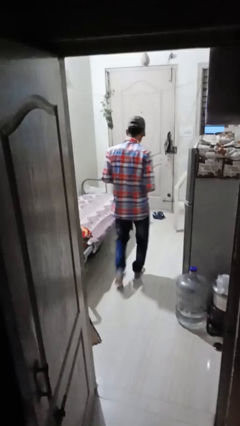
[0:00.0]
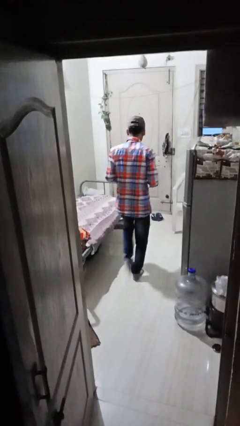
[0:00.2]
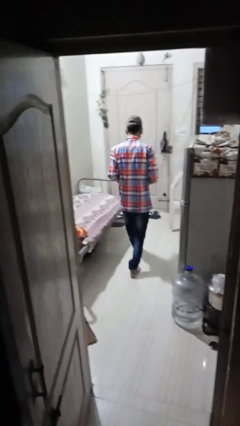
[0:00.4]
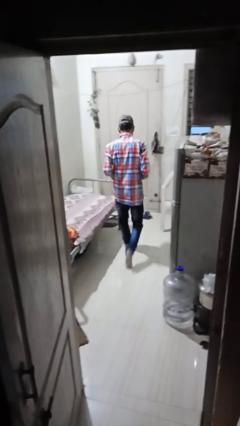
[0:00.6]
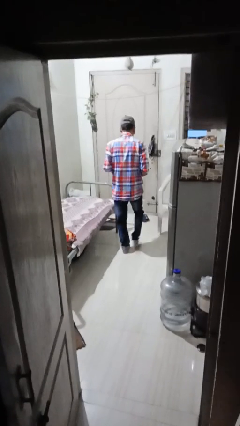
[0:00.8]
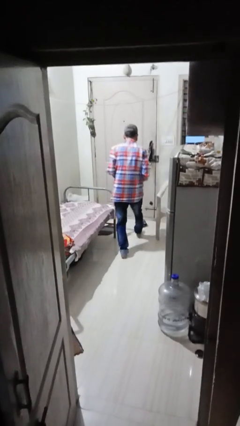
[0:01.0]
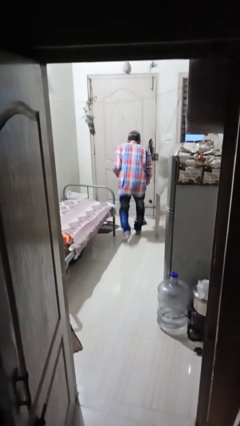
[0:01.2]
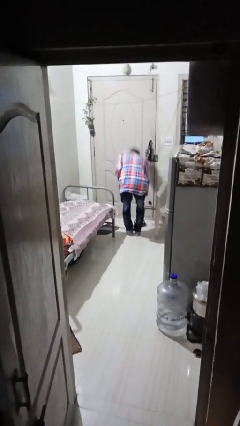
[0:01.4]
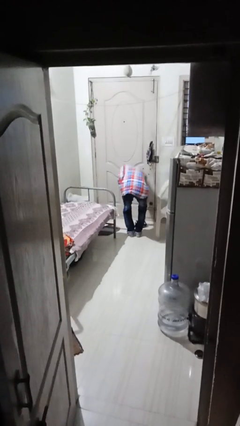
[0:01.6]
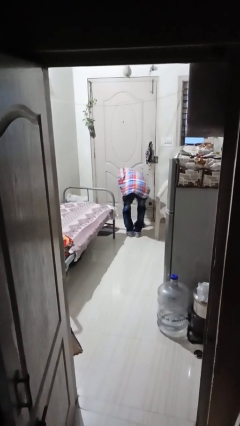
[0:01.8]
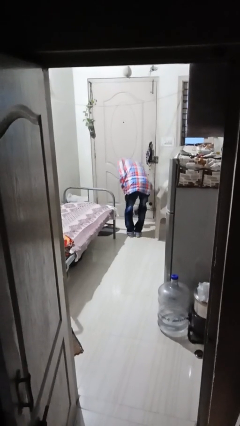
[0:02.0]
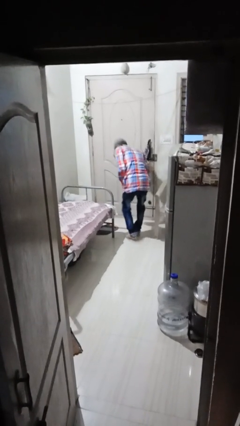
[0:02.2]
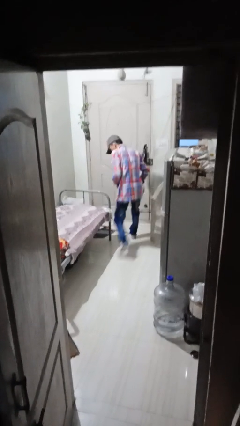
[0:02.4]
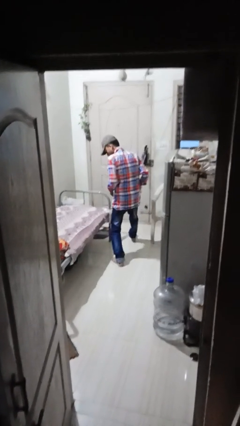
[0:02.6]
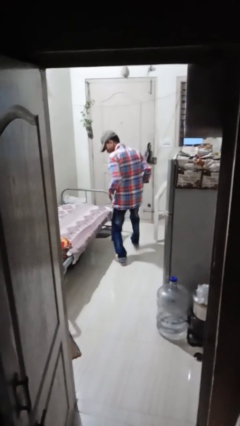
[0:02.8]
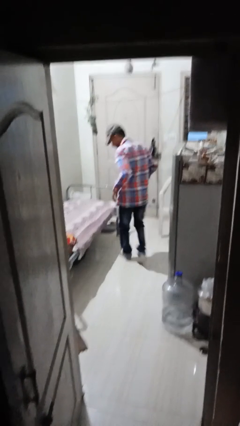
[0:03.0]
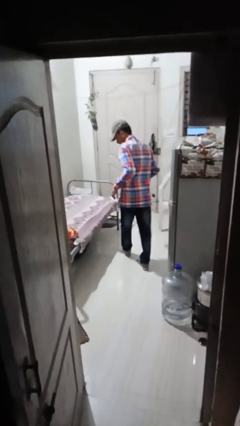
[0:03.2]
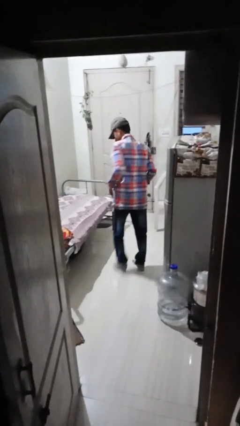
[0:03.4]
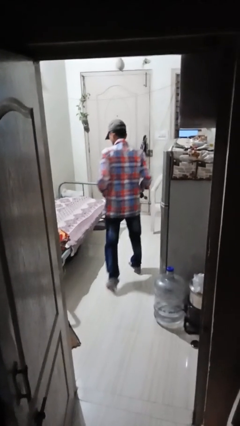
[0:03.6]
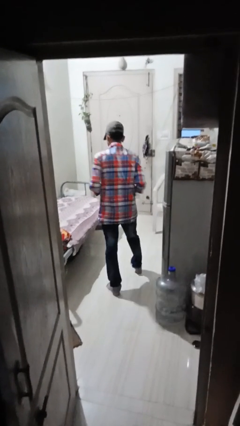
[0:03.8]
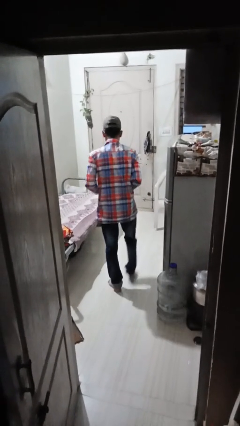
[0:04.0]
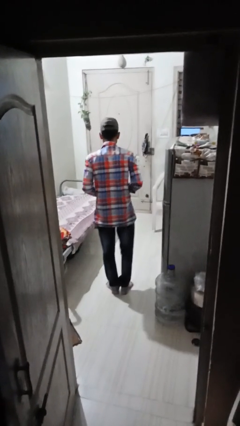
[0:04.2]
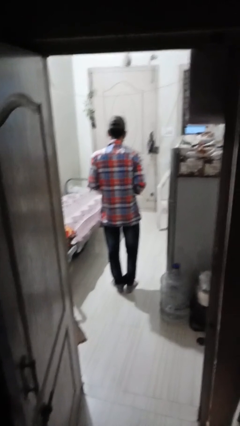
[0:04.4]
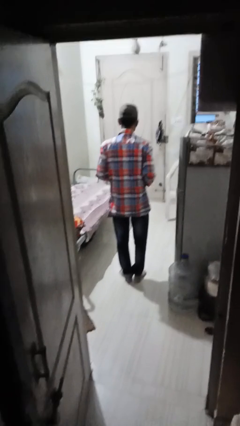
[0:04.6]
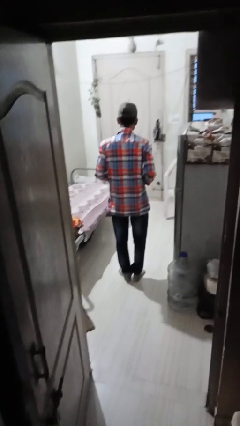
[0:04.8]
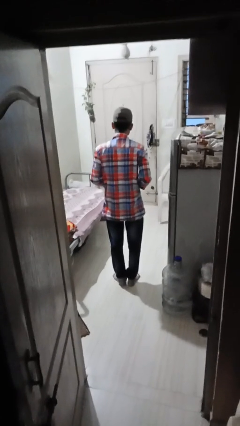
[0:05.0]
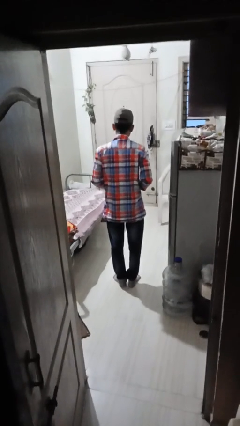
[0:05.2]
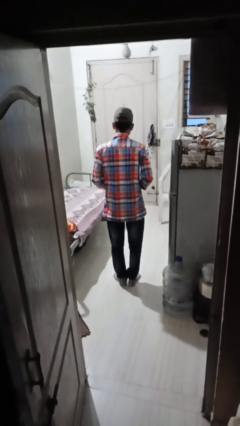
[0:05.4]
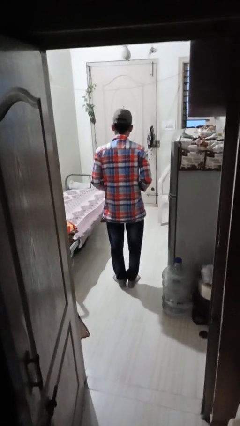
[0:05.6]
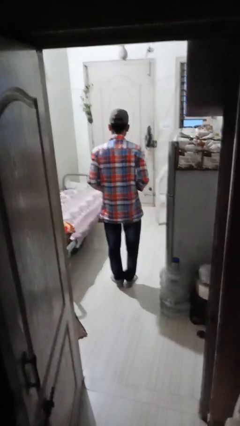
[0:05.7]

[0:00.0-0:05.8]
person picks up object from floor

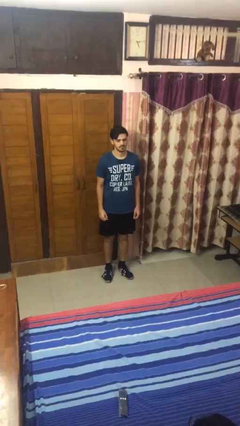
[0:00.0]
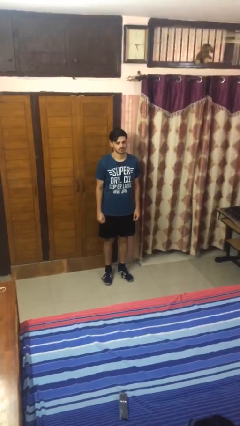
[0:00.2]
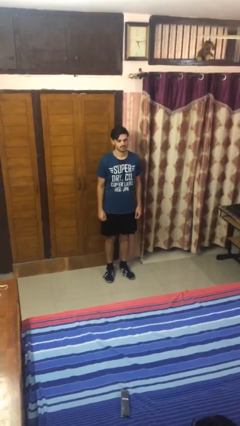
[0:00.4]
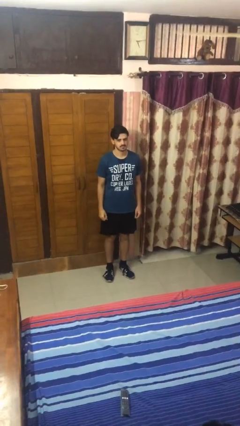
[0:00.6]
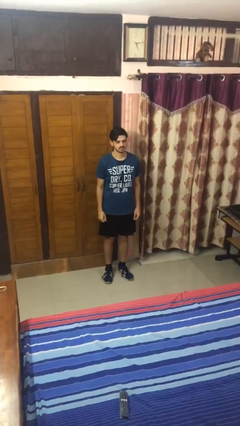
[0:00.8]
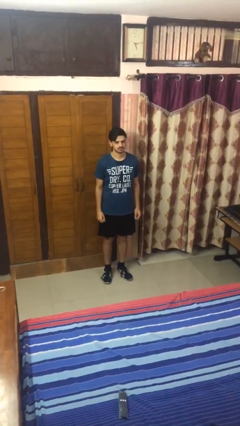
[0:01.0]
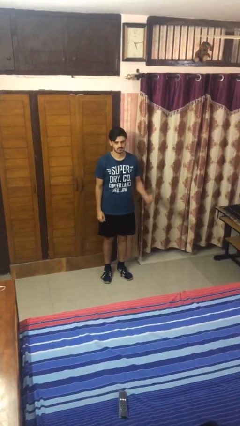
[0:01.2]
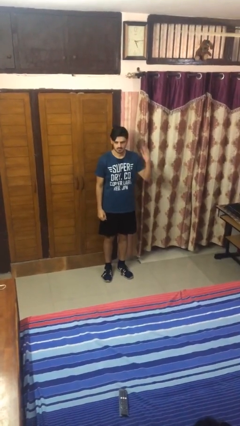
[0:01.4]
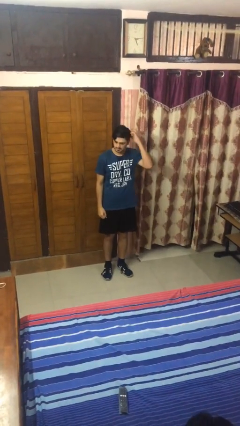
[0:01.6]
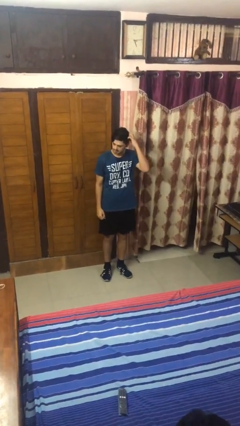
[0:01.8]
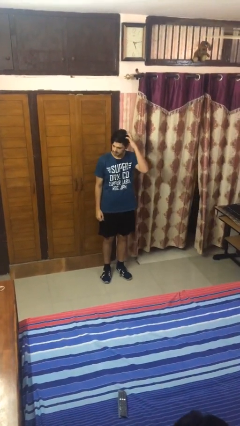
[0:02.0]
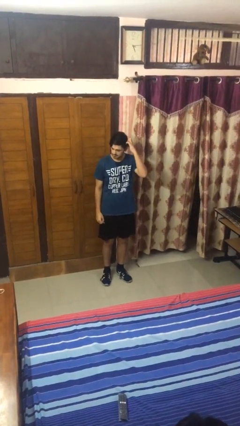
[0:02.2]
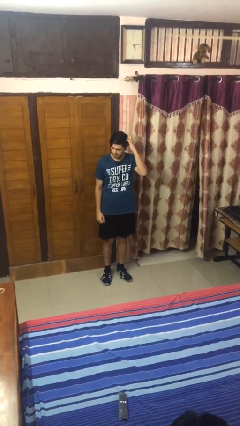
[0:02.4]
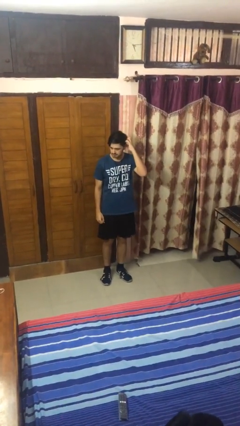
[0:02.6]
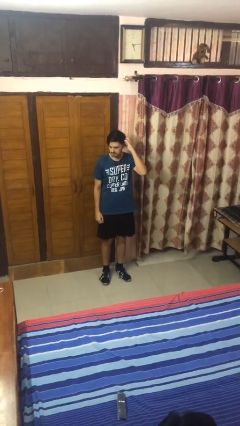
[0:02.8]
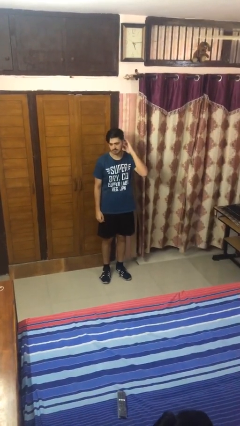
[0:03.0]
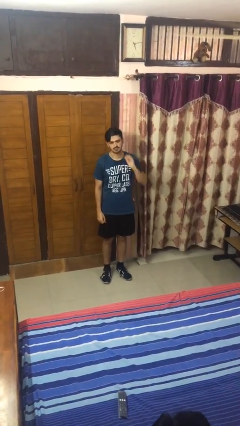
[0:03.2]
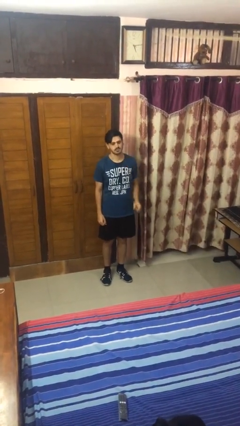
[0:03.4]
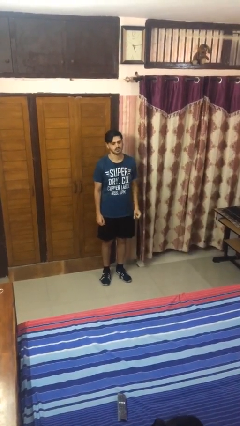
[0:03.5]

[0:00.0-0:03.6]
person scratches face

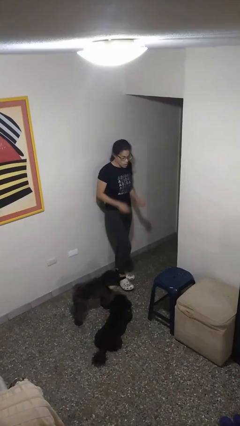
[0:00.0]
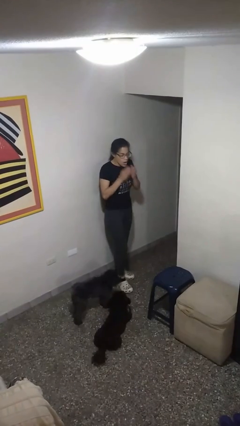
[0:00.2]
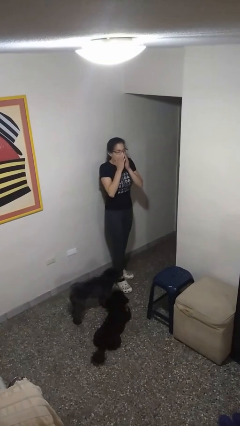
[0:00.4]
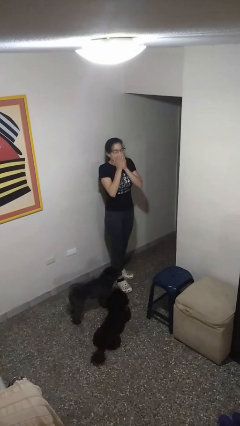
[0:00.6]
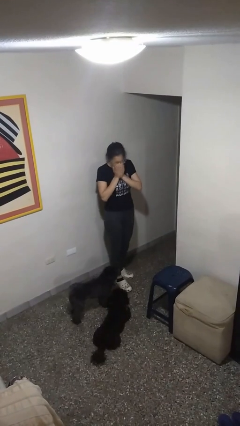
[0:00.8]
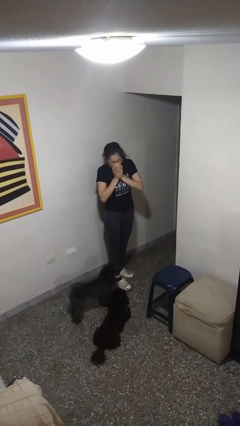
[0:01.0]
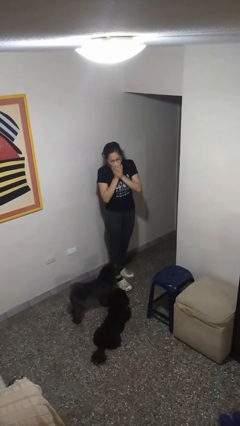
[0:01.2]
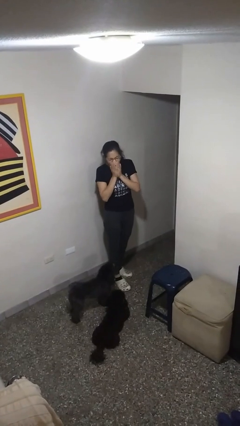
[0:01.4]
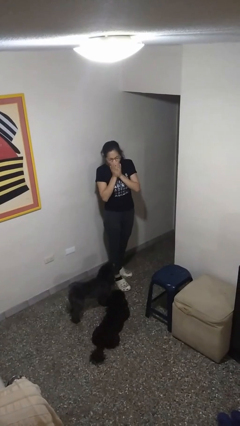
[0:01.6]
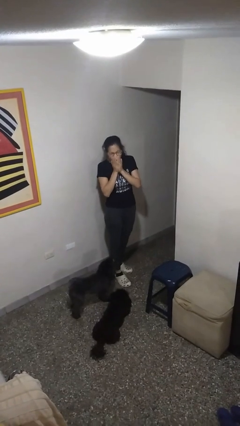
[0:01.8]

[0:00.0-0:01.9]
person sneezes into hand

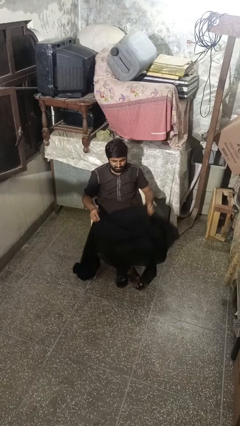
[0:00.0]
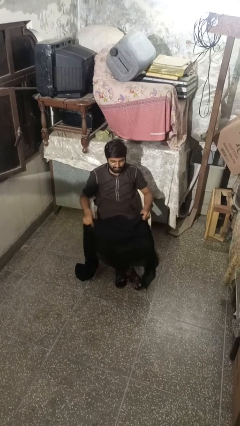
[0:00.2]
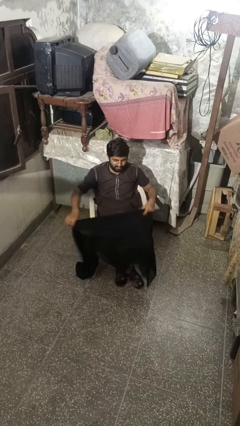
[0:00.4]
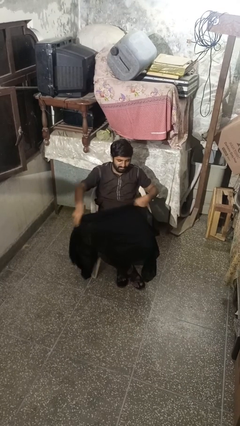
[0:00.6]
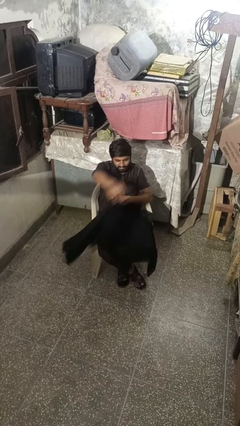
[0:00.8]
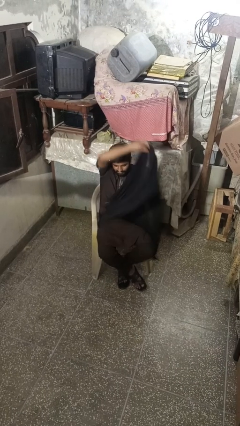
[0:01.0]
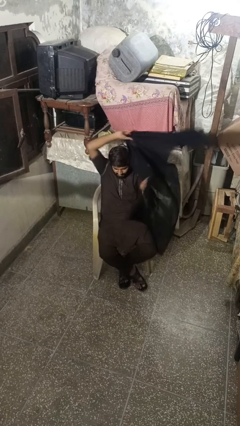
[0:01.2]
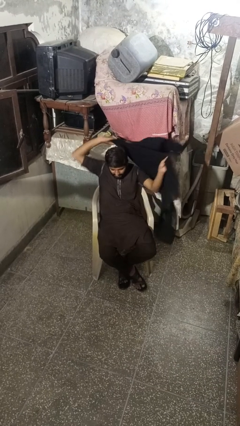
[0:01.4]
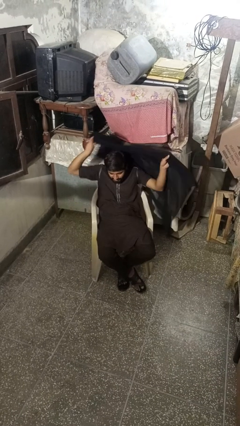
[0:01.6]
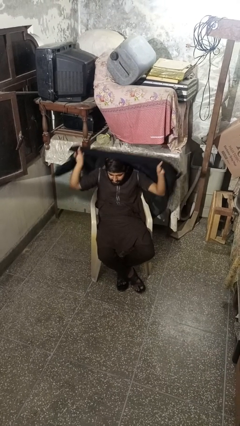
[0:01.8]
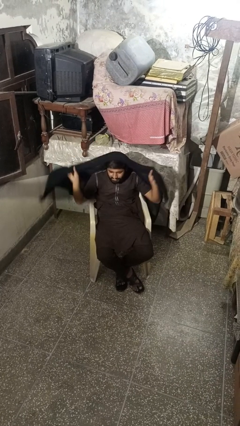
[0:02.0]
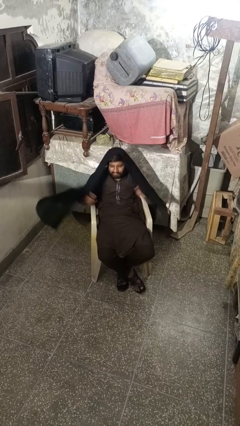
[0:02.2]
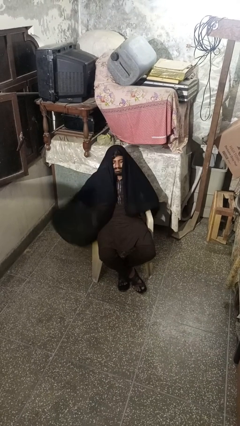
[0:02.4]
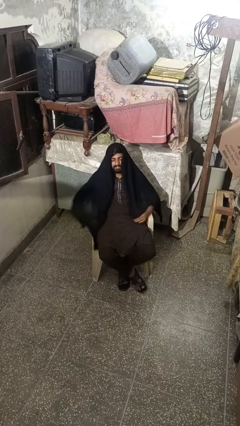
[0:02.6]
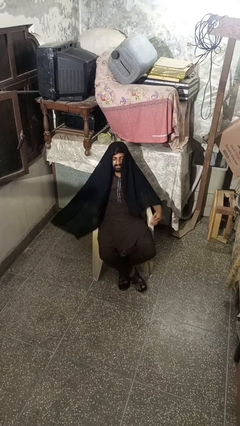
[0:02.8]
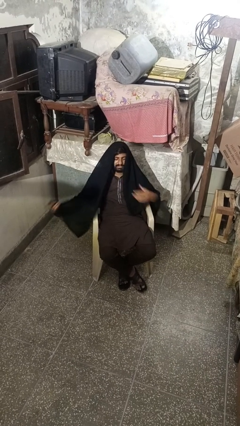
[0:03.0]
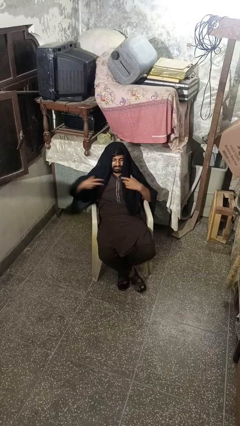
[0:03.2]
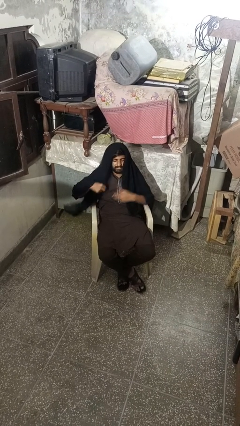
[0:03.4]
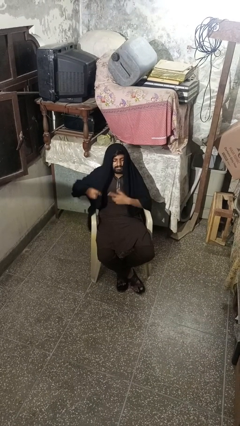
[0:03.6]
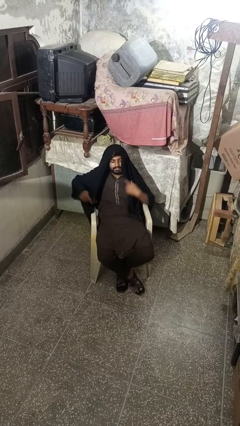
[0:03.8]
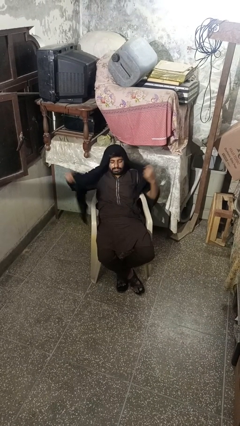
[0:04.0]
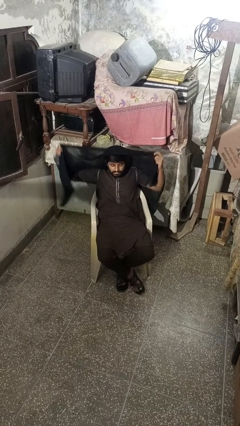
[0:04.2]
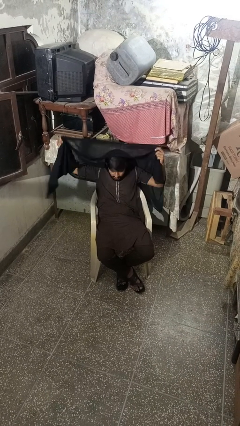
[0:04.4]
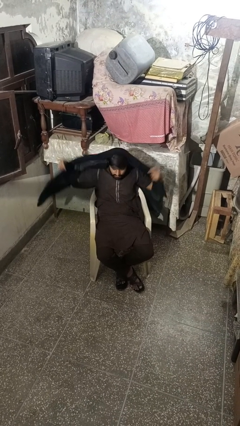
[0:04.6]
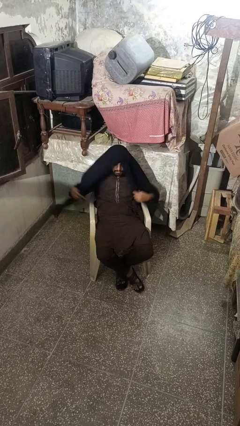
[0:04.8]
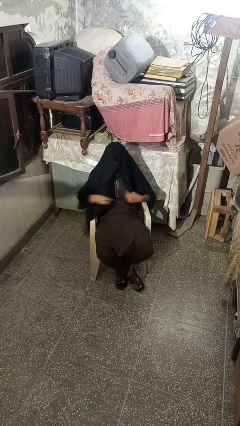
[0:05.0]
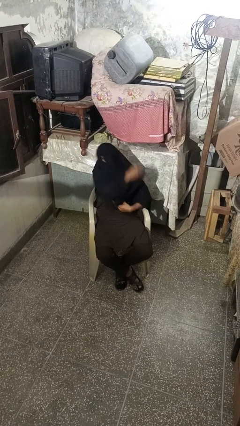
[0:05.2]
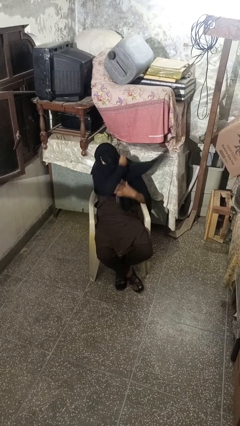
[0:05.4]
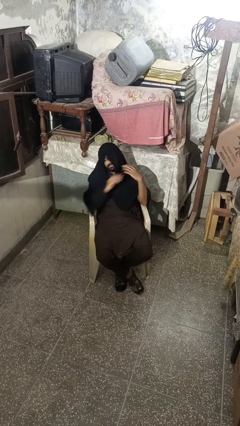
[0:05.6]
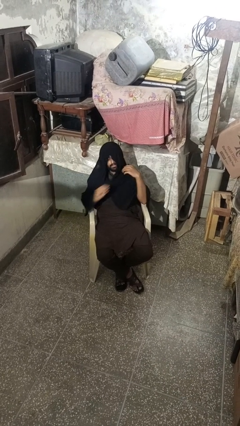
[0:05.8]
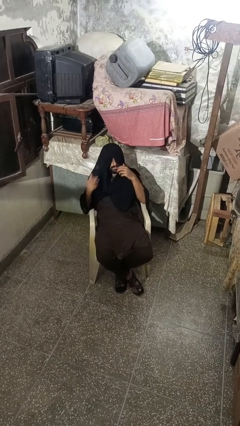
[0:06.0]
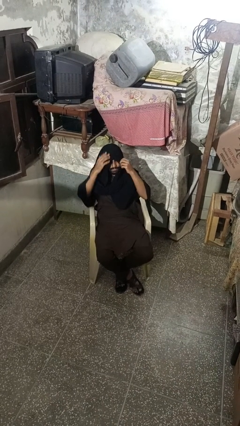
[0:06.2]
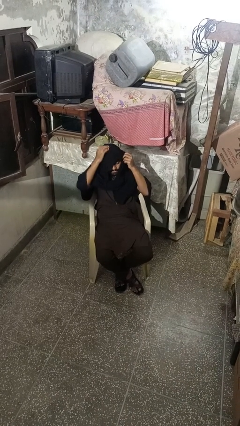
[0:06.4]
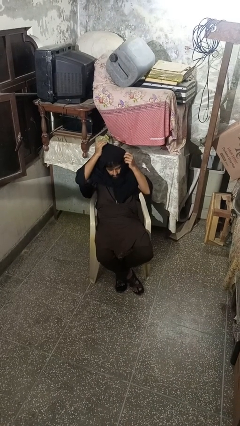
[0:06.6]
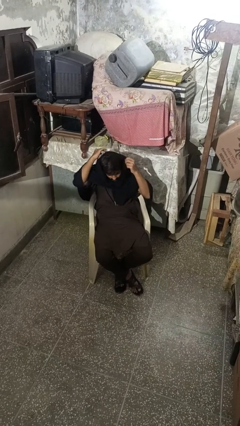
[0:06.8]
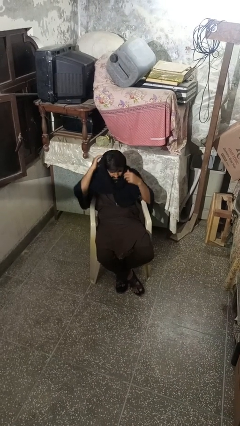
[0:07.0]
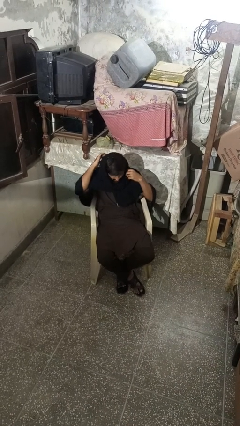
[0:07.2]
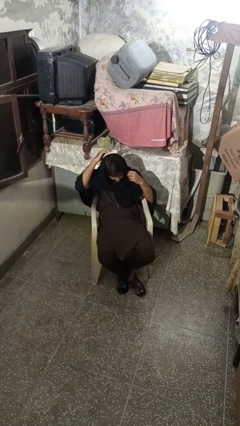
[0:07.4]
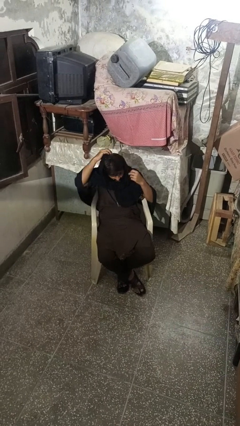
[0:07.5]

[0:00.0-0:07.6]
person puts on scarf
